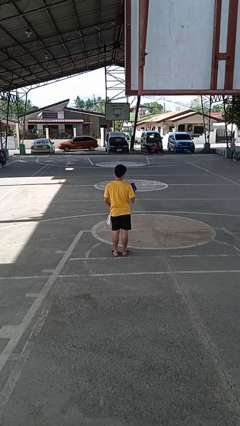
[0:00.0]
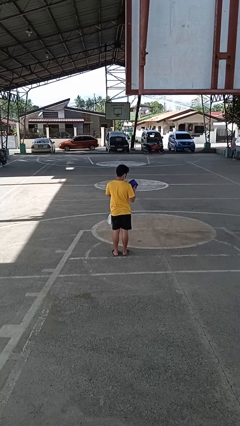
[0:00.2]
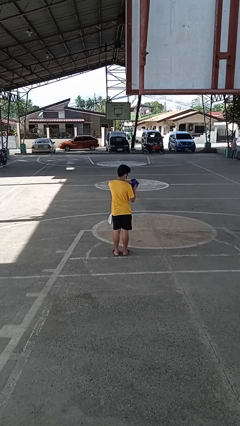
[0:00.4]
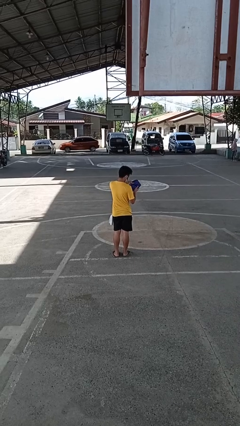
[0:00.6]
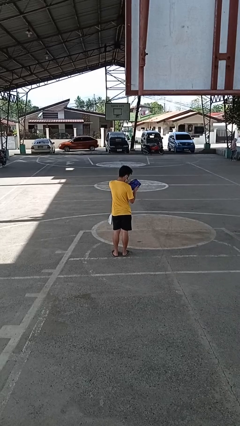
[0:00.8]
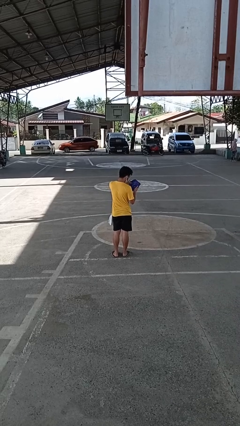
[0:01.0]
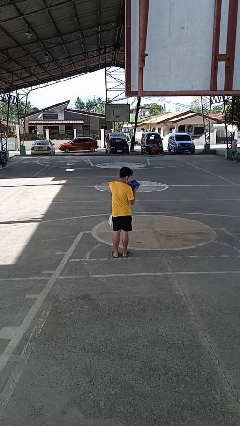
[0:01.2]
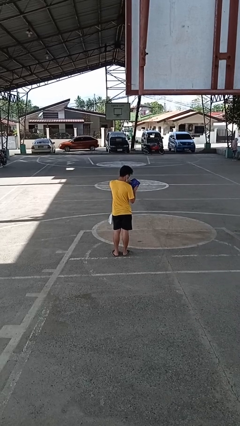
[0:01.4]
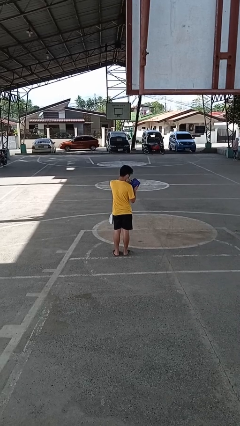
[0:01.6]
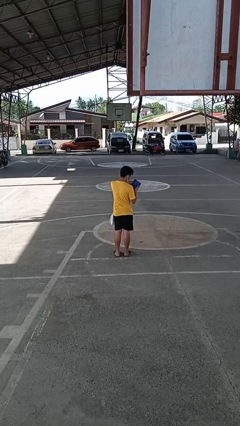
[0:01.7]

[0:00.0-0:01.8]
person searches in purse

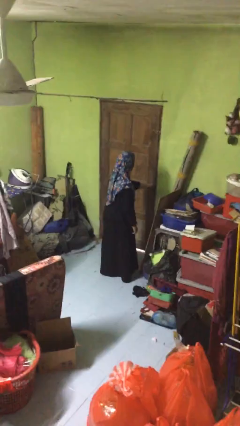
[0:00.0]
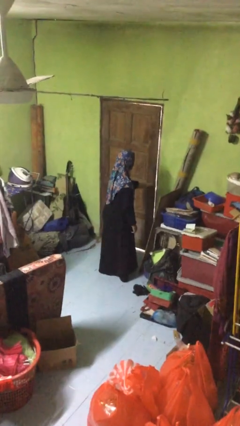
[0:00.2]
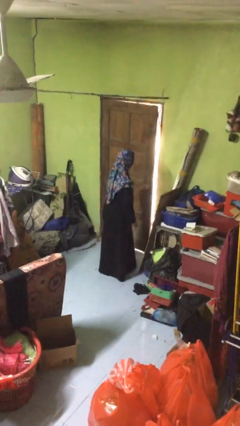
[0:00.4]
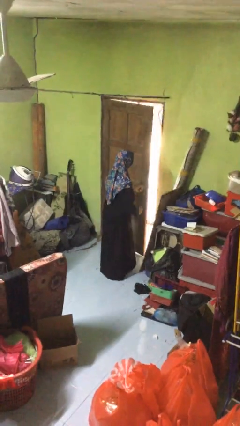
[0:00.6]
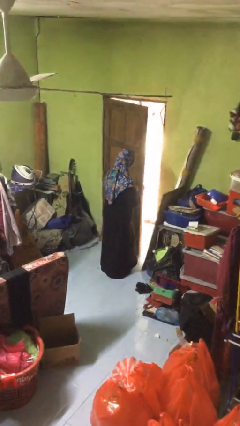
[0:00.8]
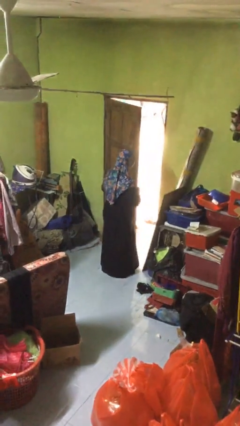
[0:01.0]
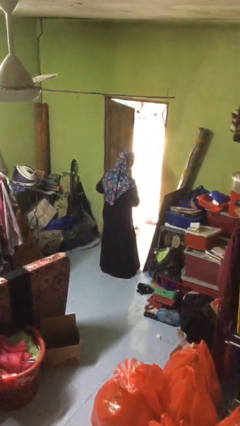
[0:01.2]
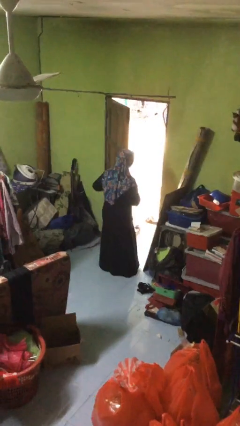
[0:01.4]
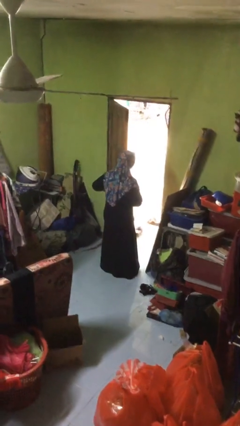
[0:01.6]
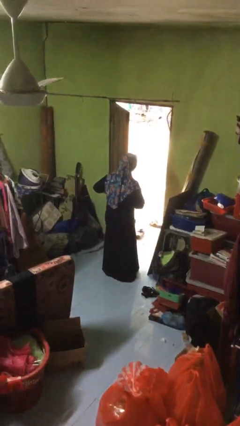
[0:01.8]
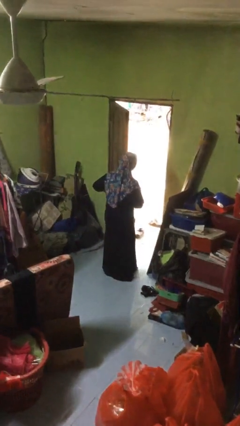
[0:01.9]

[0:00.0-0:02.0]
person opens facility door

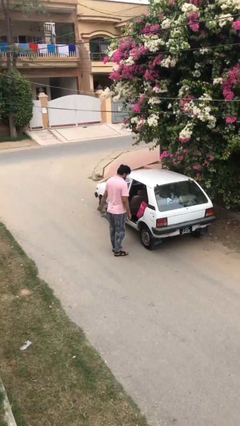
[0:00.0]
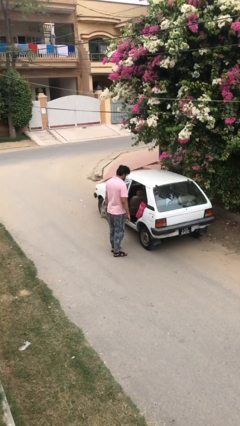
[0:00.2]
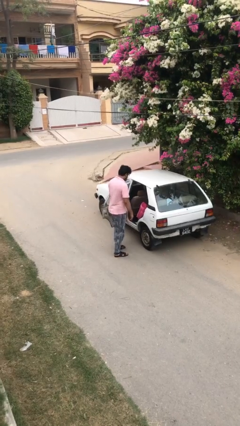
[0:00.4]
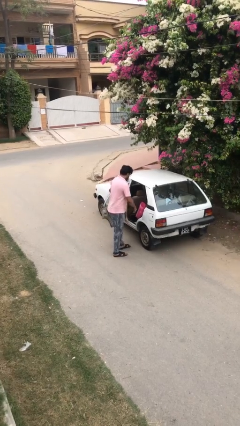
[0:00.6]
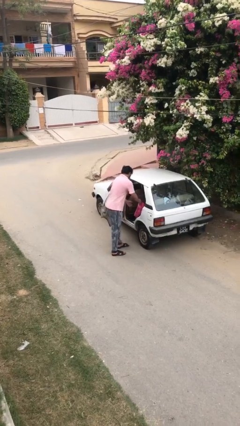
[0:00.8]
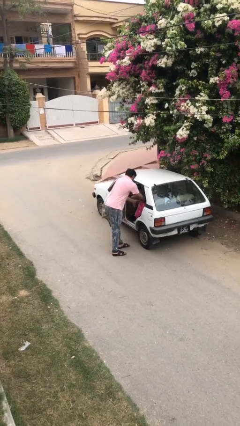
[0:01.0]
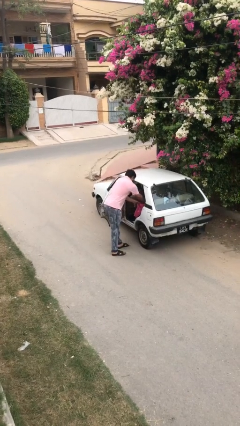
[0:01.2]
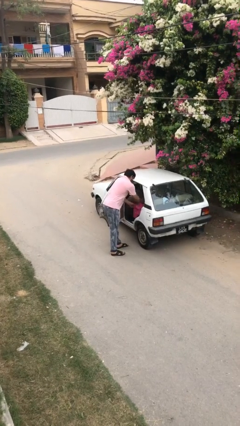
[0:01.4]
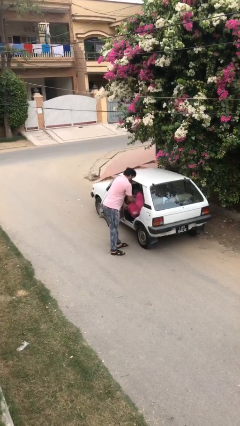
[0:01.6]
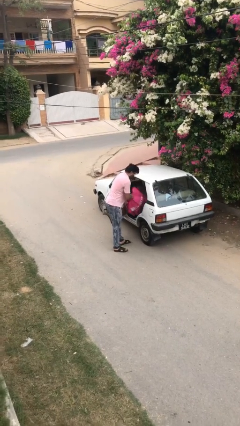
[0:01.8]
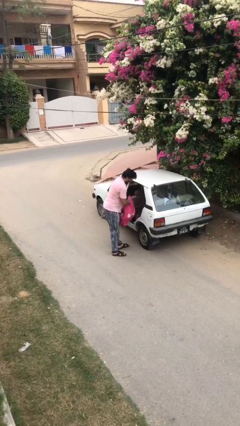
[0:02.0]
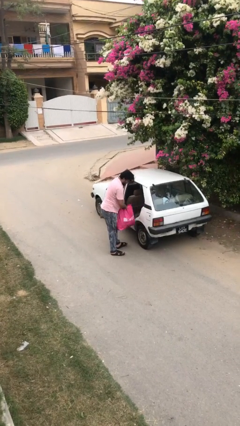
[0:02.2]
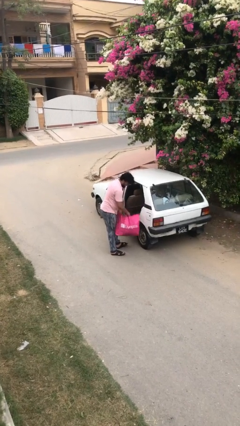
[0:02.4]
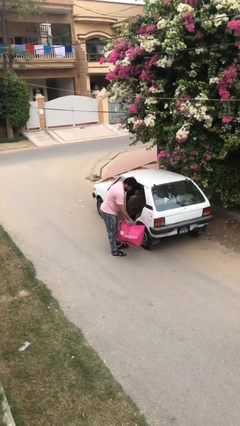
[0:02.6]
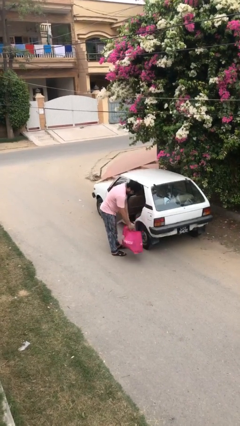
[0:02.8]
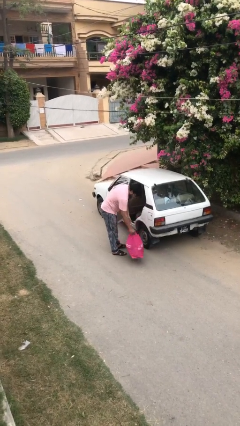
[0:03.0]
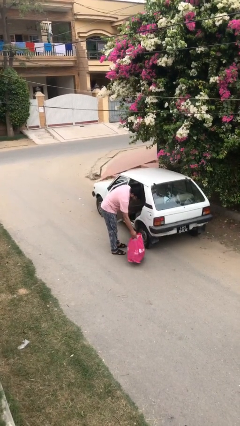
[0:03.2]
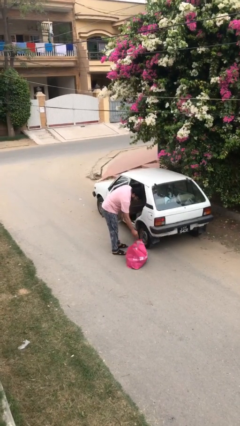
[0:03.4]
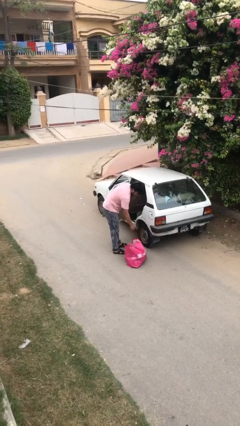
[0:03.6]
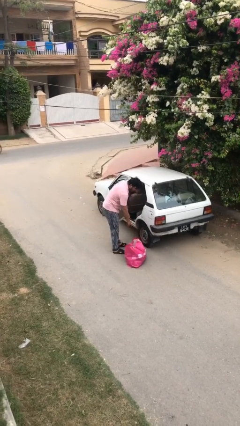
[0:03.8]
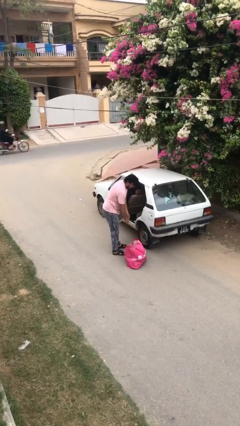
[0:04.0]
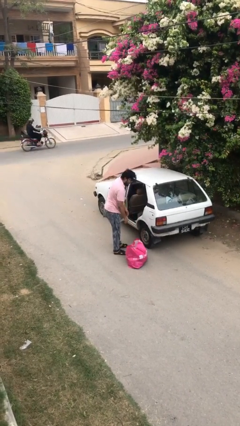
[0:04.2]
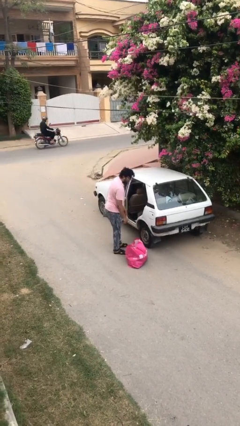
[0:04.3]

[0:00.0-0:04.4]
person unloads car

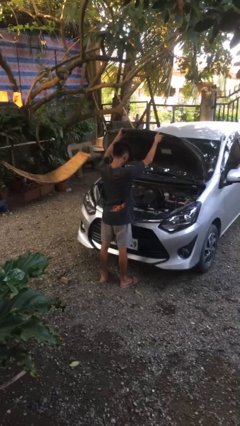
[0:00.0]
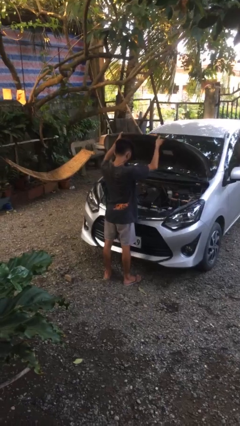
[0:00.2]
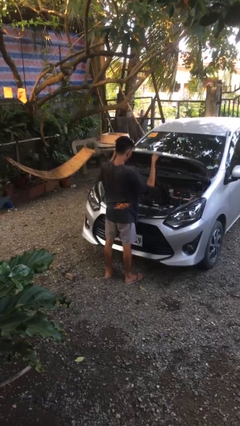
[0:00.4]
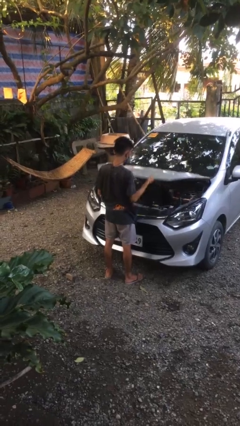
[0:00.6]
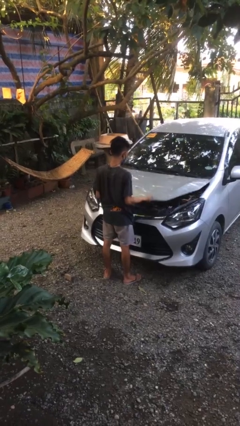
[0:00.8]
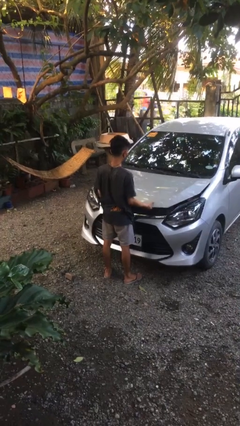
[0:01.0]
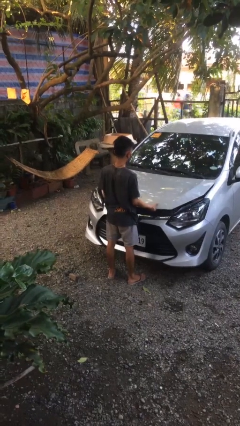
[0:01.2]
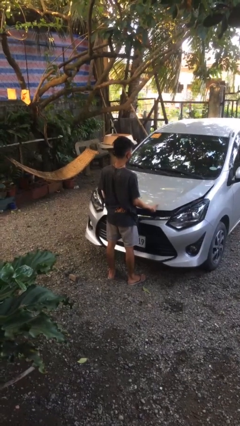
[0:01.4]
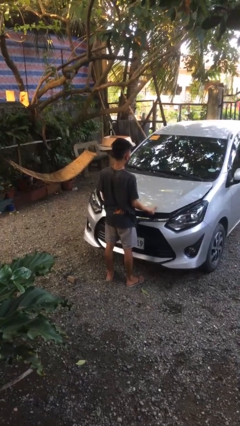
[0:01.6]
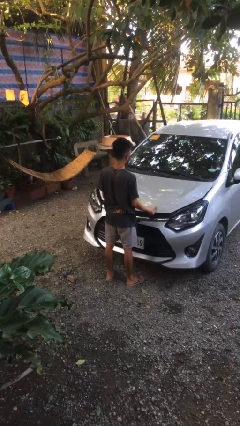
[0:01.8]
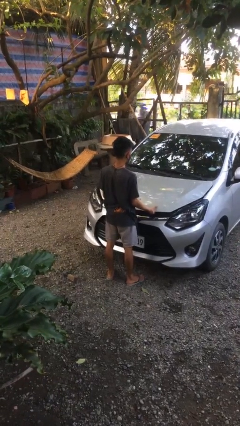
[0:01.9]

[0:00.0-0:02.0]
person closes car hood

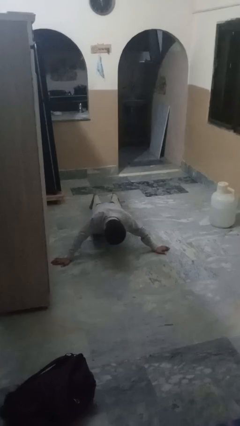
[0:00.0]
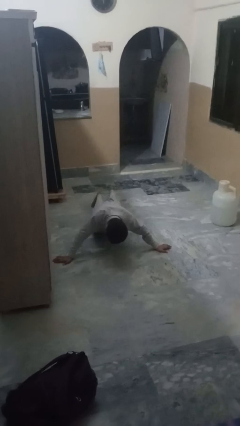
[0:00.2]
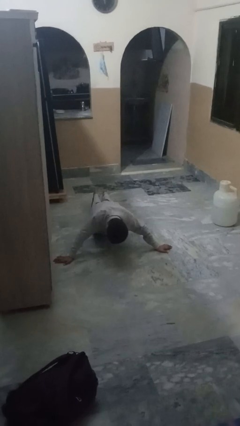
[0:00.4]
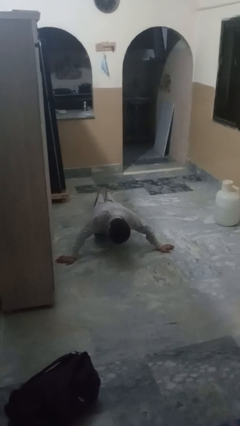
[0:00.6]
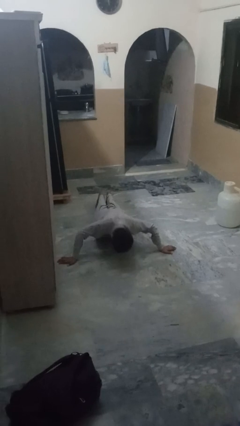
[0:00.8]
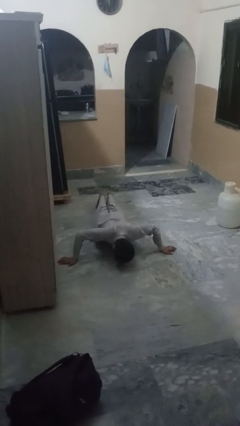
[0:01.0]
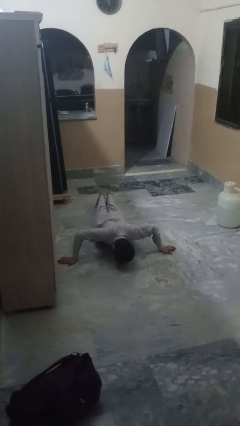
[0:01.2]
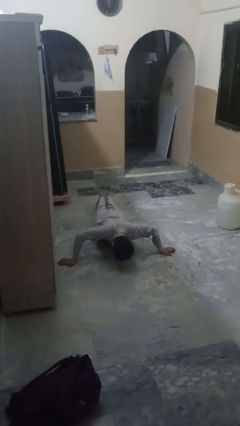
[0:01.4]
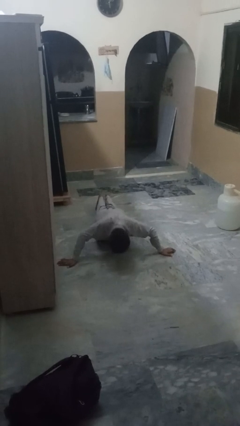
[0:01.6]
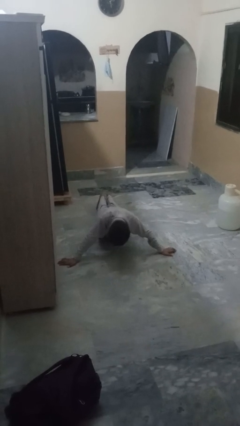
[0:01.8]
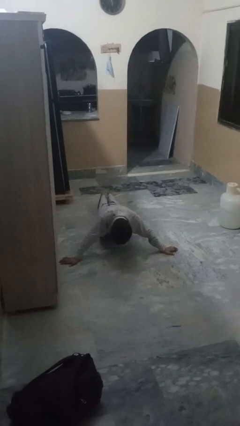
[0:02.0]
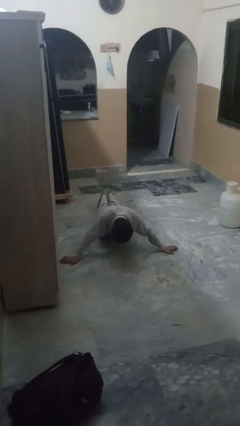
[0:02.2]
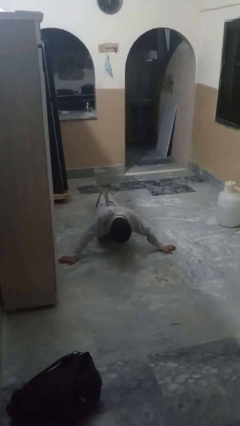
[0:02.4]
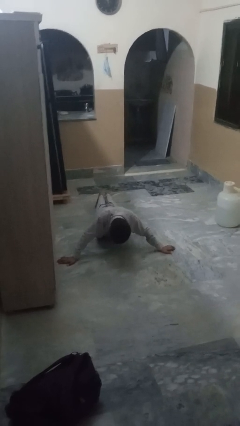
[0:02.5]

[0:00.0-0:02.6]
person exercises with pushup

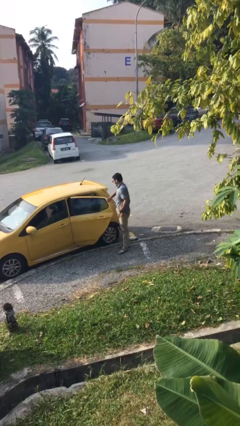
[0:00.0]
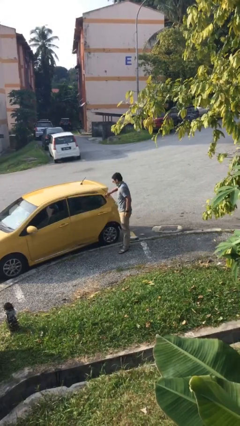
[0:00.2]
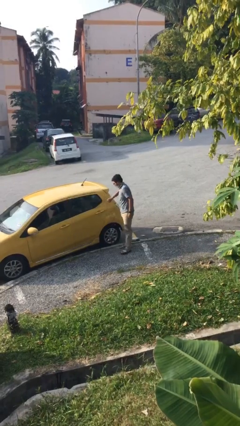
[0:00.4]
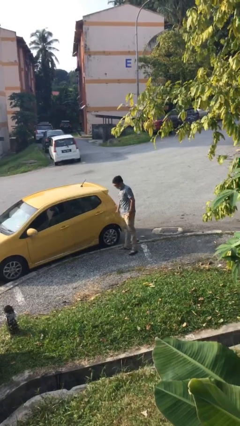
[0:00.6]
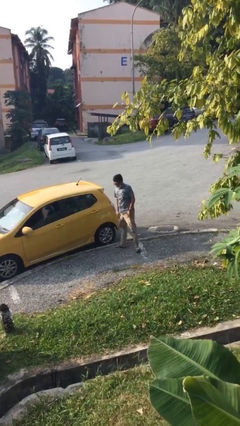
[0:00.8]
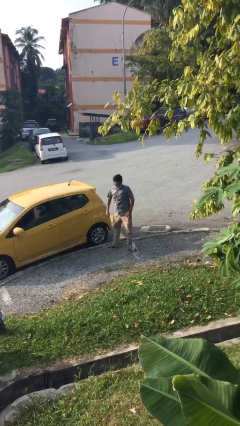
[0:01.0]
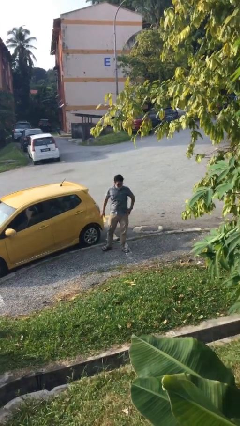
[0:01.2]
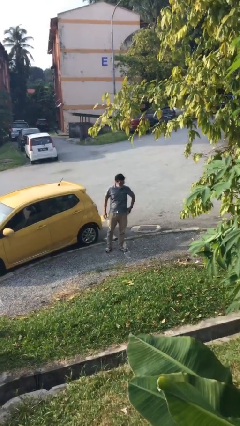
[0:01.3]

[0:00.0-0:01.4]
person closes car door

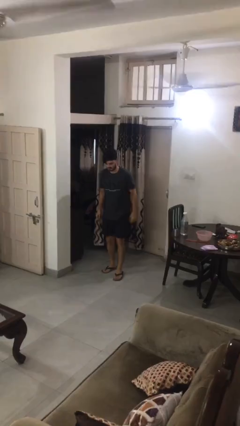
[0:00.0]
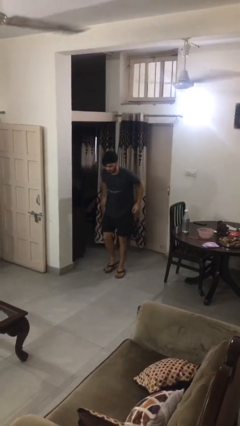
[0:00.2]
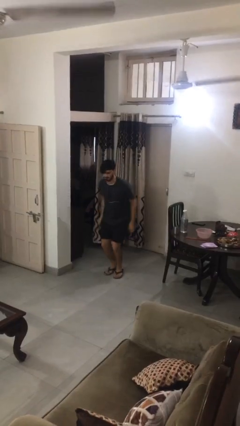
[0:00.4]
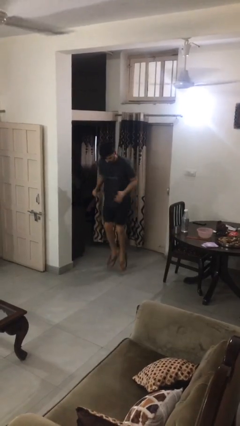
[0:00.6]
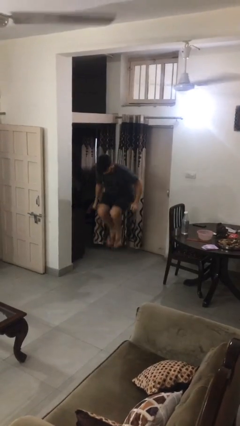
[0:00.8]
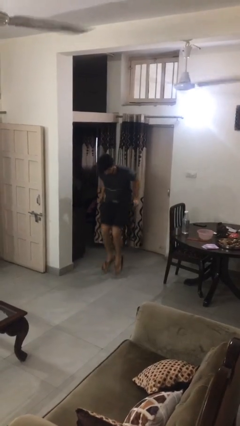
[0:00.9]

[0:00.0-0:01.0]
person jumps

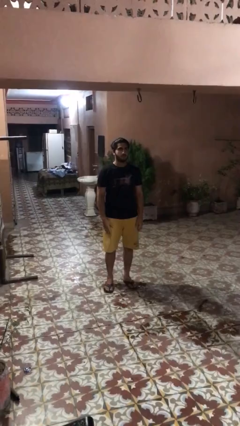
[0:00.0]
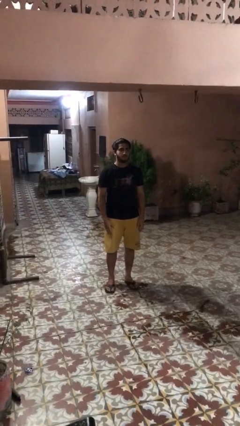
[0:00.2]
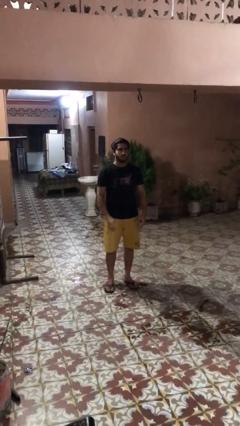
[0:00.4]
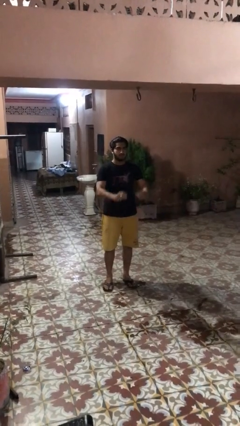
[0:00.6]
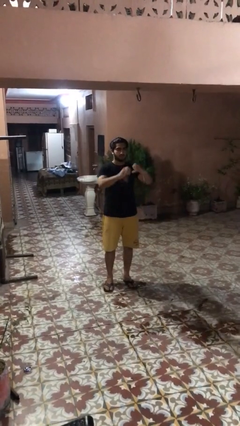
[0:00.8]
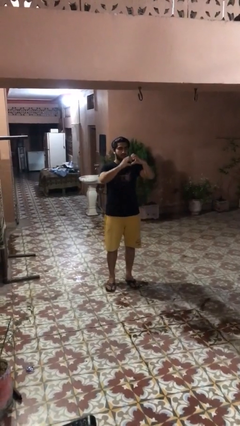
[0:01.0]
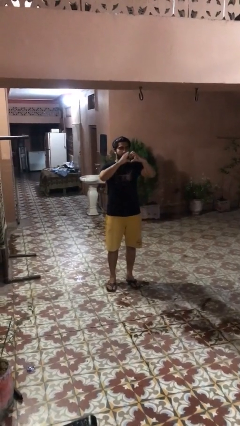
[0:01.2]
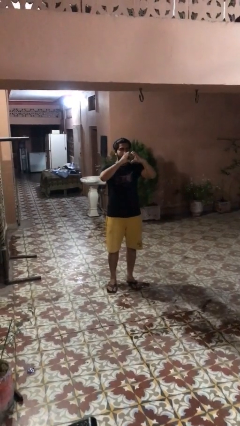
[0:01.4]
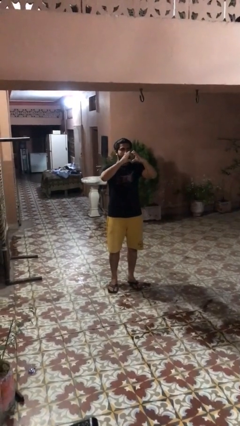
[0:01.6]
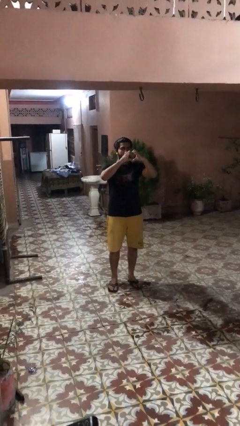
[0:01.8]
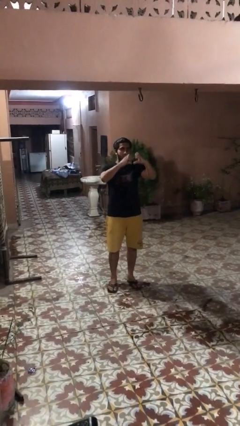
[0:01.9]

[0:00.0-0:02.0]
person gestures heart
